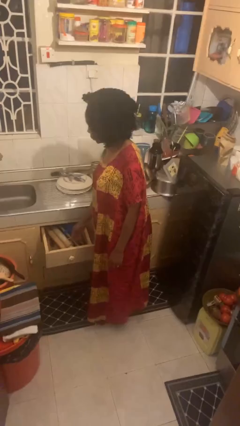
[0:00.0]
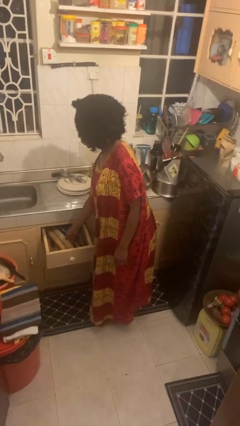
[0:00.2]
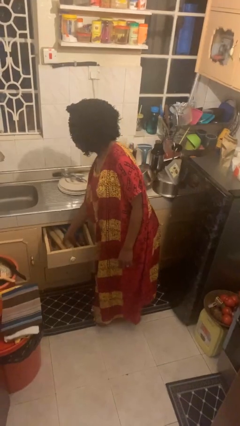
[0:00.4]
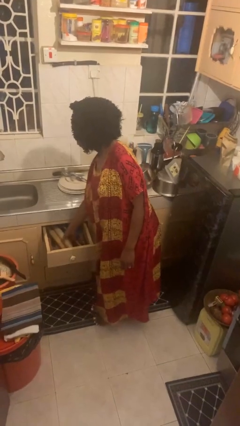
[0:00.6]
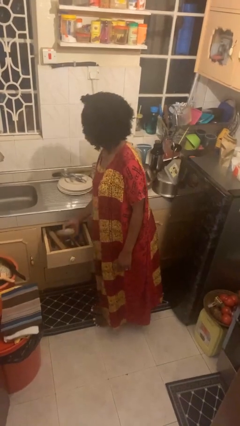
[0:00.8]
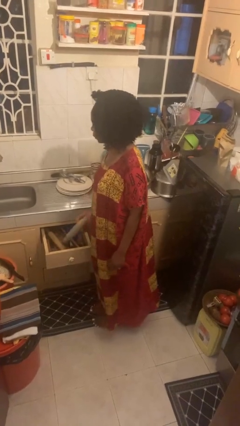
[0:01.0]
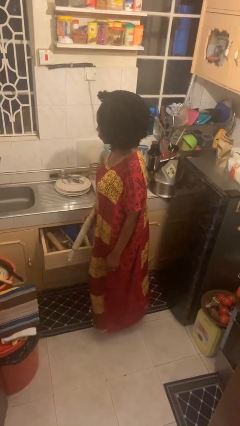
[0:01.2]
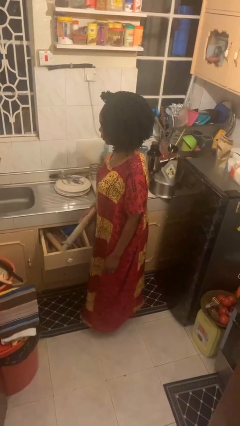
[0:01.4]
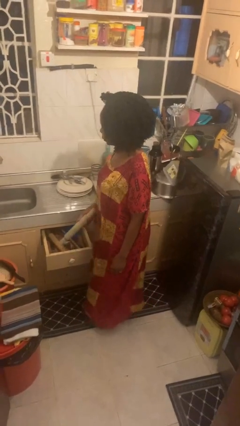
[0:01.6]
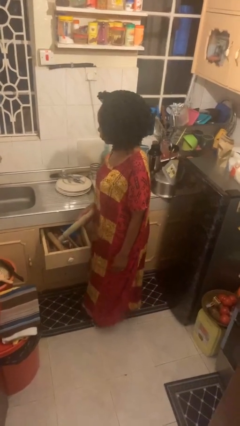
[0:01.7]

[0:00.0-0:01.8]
person takes object from kitchen drawer

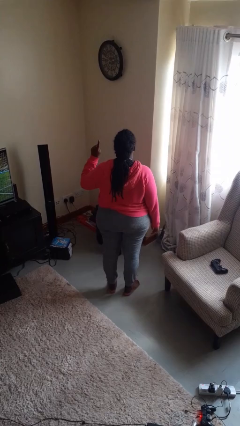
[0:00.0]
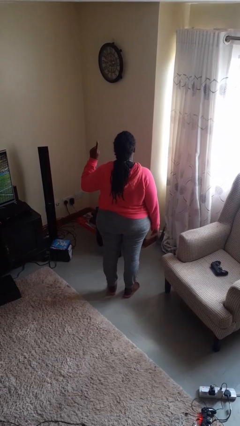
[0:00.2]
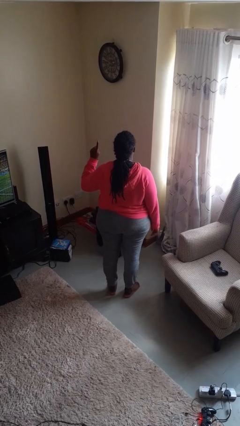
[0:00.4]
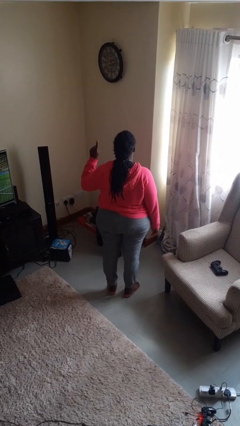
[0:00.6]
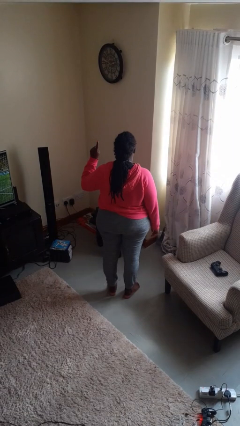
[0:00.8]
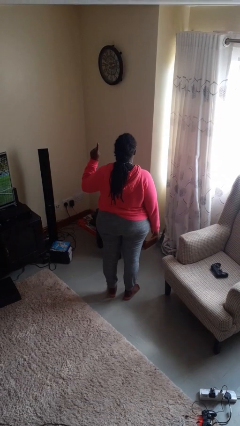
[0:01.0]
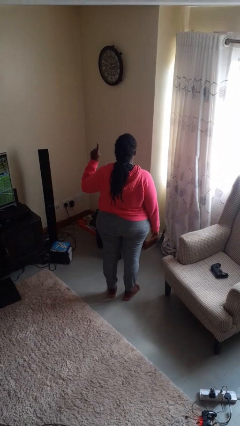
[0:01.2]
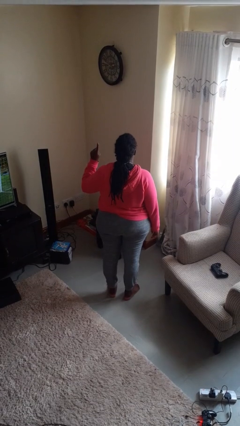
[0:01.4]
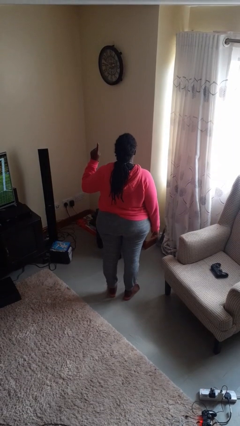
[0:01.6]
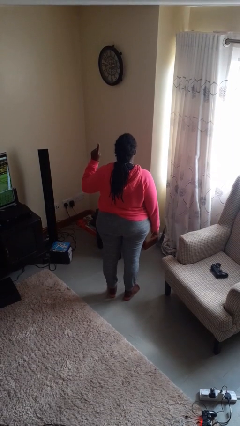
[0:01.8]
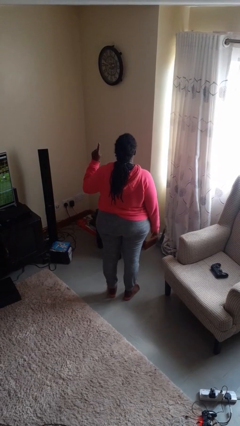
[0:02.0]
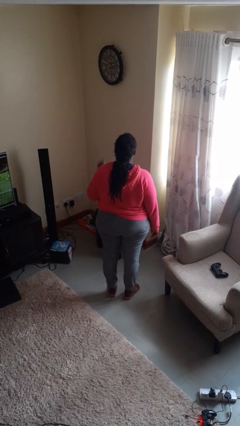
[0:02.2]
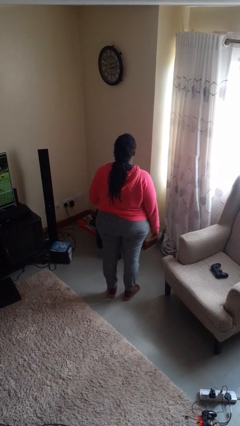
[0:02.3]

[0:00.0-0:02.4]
person gestures number one

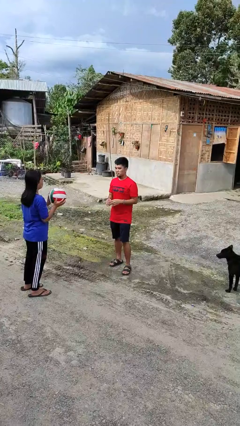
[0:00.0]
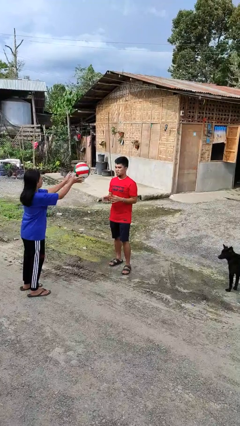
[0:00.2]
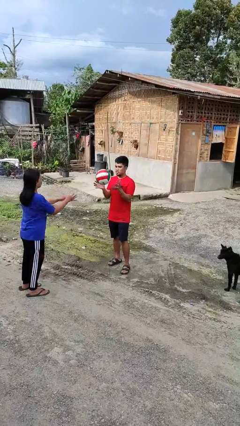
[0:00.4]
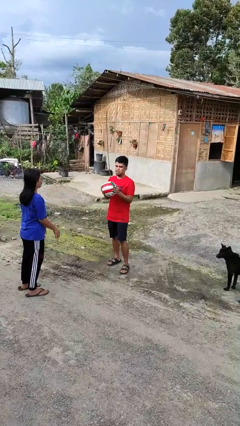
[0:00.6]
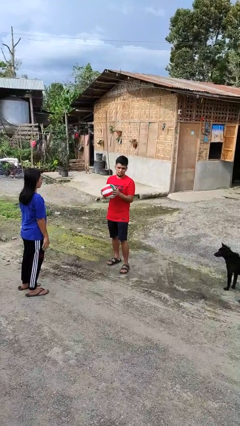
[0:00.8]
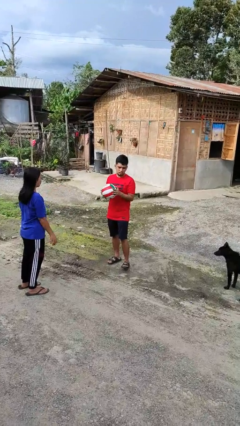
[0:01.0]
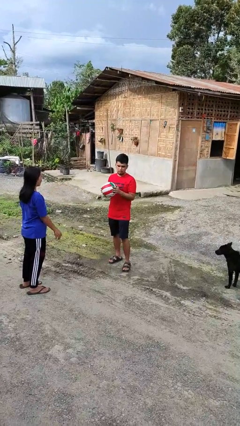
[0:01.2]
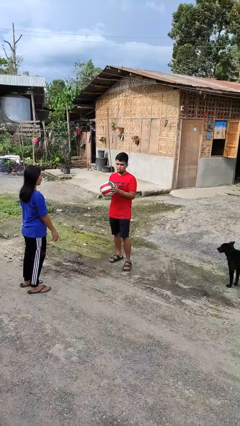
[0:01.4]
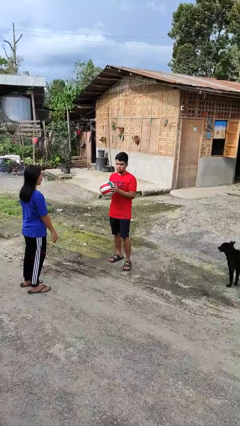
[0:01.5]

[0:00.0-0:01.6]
person catches object from person

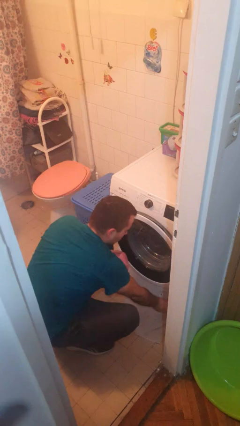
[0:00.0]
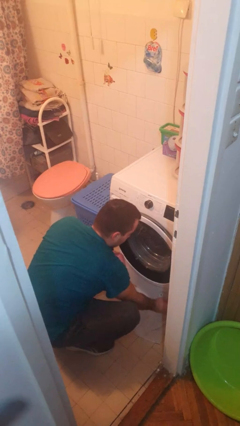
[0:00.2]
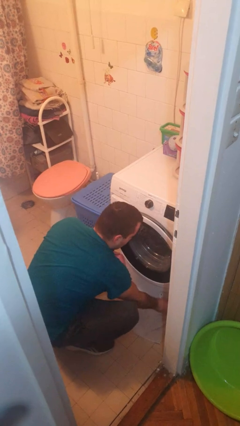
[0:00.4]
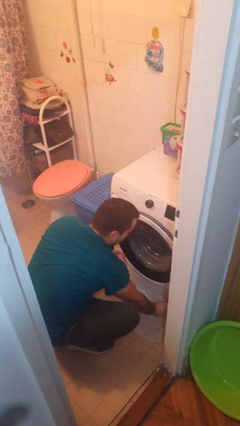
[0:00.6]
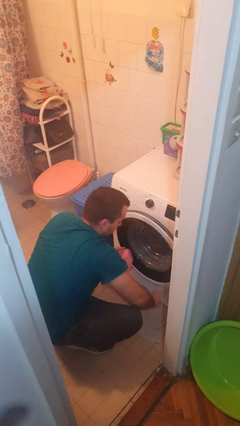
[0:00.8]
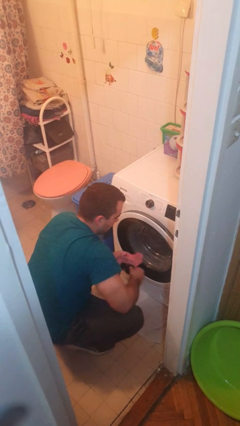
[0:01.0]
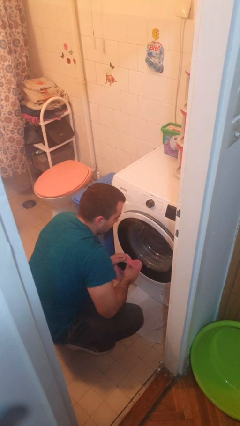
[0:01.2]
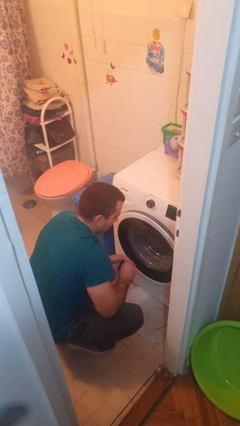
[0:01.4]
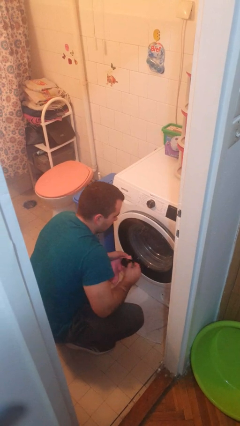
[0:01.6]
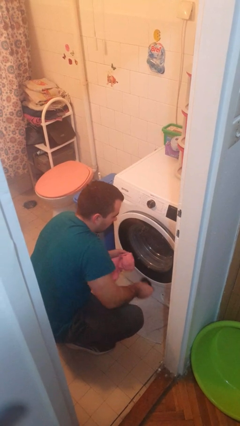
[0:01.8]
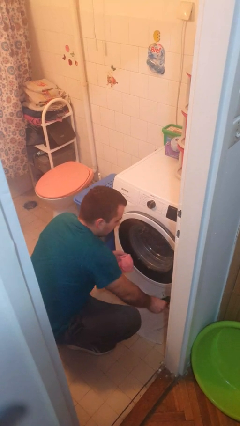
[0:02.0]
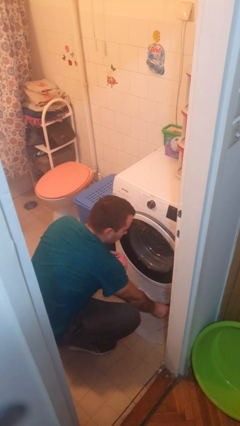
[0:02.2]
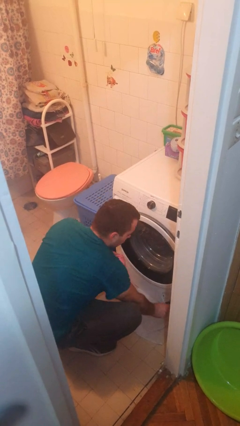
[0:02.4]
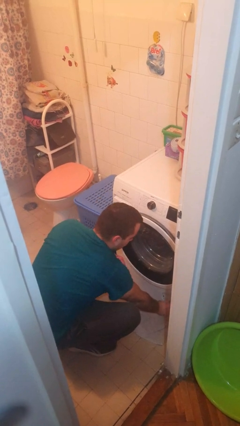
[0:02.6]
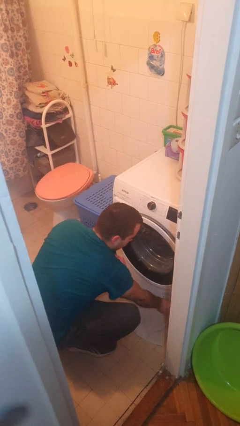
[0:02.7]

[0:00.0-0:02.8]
person cleans dryer lint trap

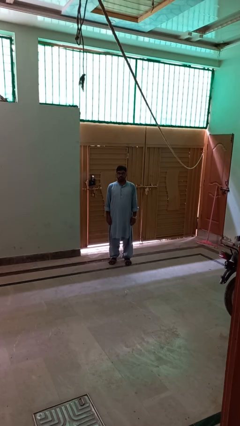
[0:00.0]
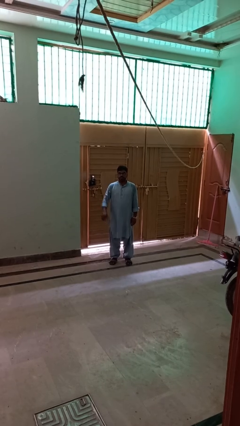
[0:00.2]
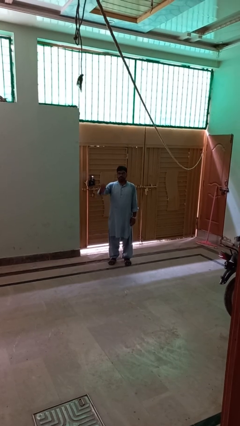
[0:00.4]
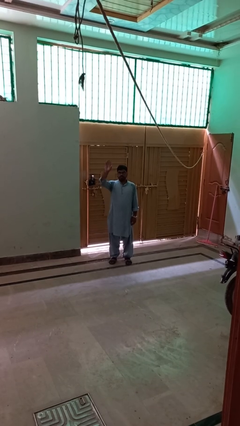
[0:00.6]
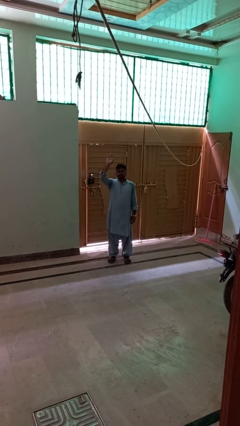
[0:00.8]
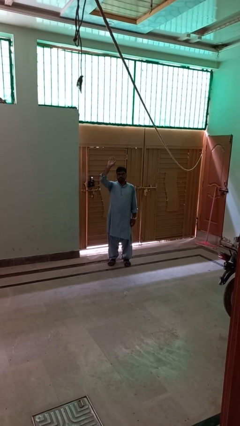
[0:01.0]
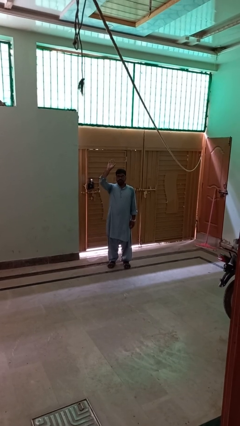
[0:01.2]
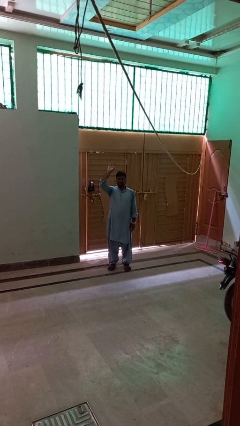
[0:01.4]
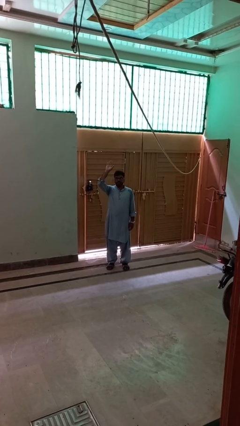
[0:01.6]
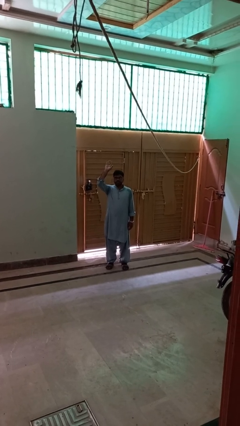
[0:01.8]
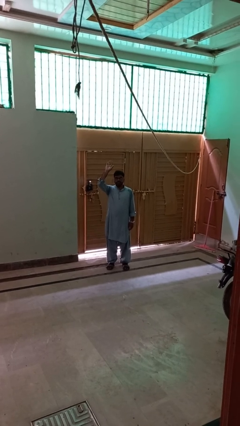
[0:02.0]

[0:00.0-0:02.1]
person gestures raise hand

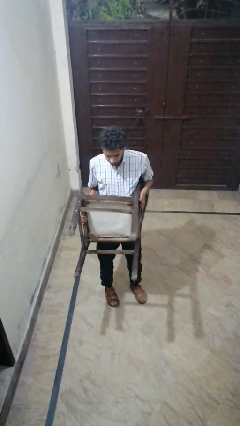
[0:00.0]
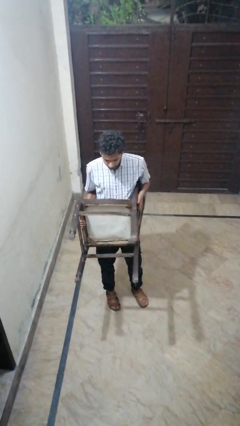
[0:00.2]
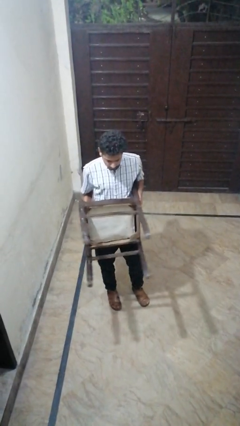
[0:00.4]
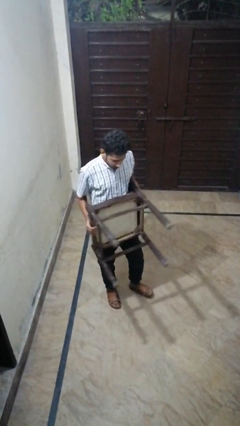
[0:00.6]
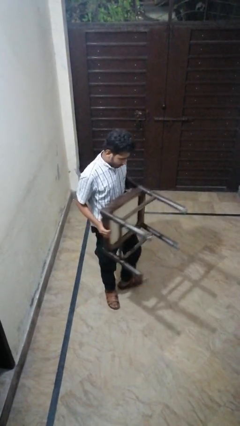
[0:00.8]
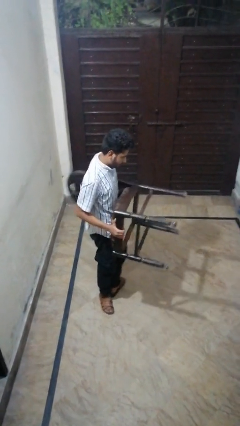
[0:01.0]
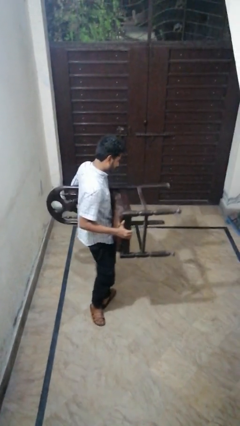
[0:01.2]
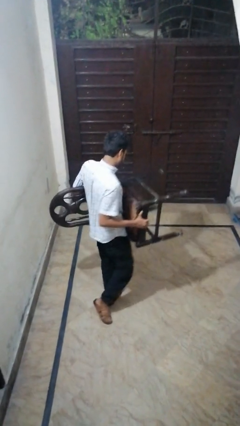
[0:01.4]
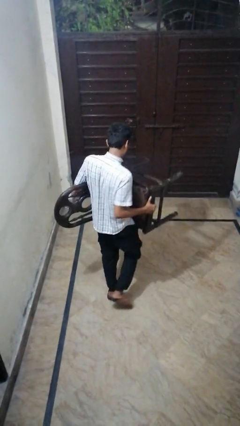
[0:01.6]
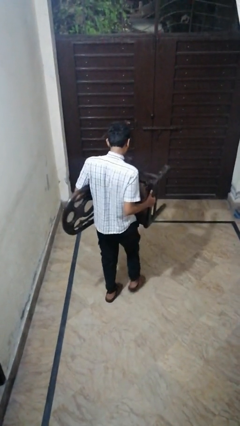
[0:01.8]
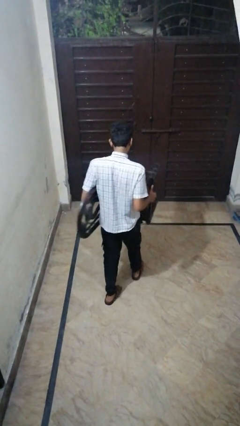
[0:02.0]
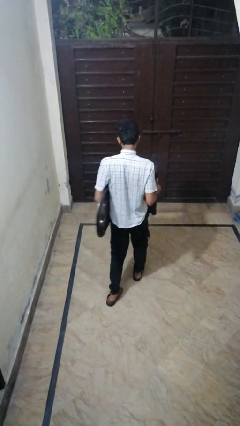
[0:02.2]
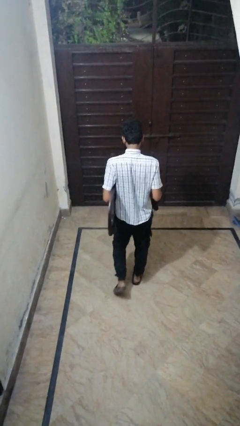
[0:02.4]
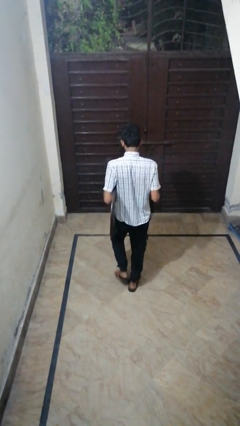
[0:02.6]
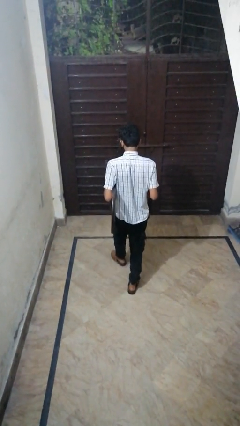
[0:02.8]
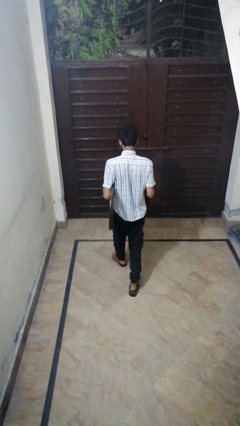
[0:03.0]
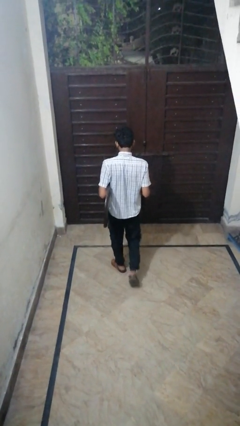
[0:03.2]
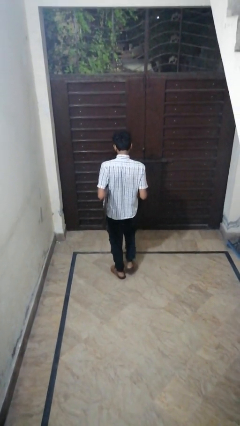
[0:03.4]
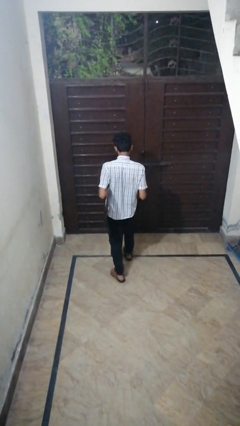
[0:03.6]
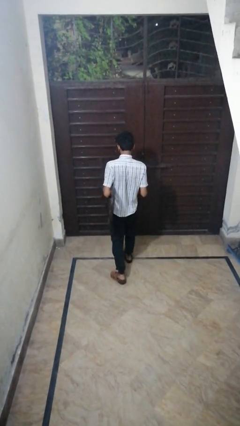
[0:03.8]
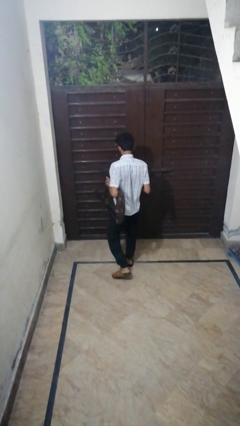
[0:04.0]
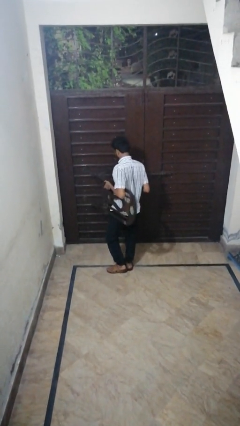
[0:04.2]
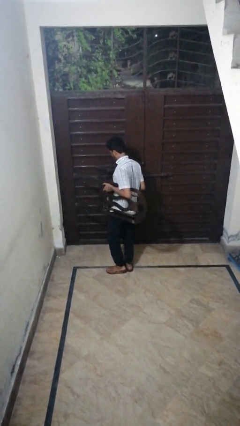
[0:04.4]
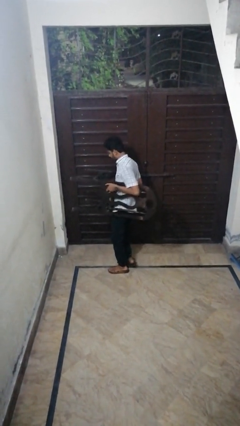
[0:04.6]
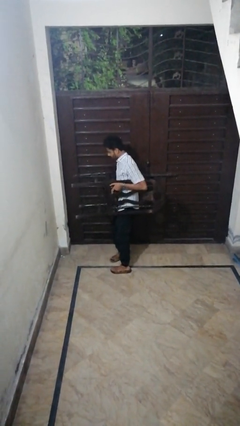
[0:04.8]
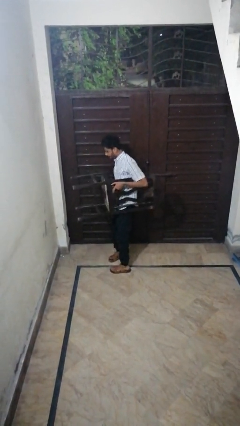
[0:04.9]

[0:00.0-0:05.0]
person carries furniture

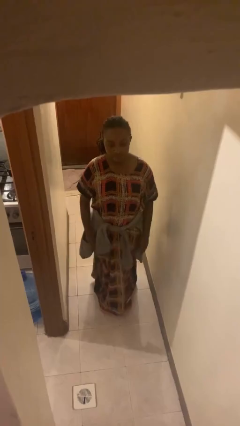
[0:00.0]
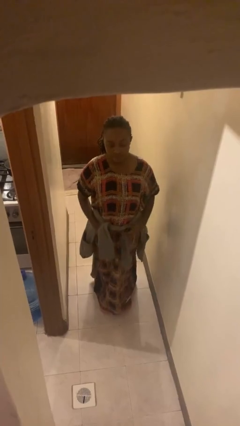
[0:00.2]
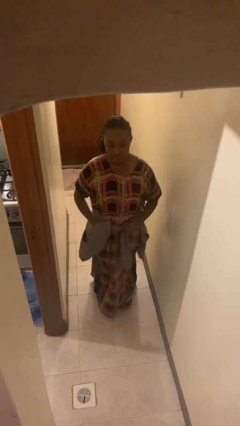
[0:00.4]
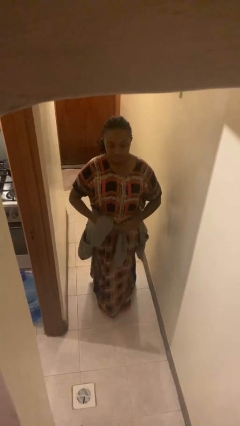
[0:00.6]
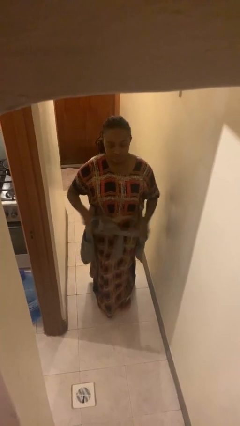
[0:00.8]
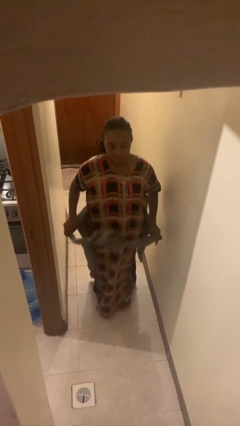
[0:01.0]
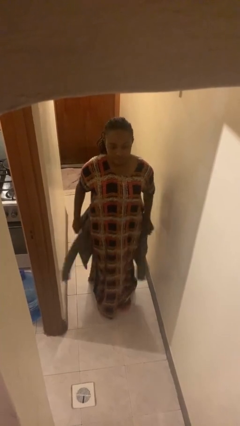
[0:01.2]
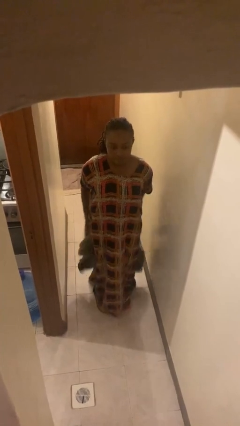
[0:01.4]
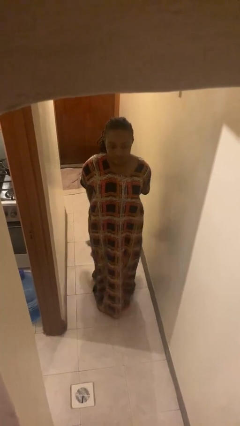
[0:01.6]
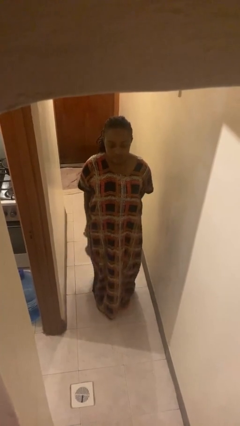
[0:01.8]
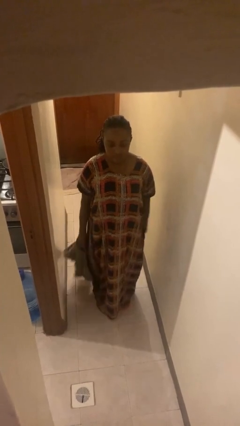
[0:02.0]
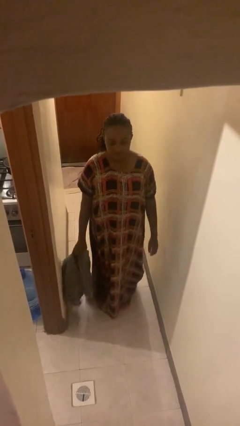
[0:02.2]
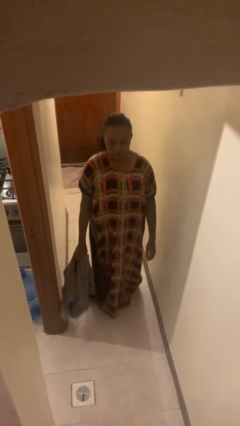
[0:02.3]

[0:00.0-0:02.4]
person unties jacket around waist
